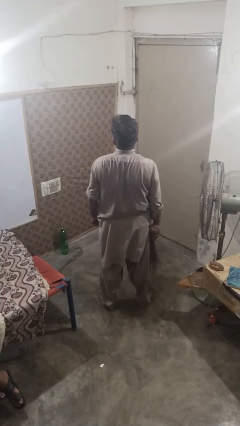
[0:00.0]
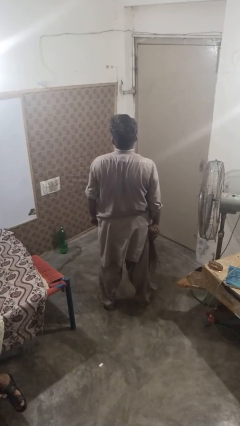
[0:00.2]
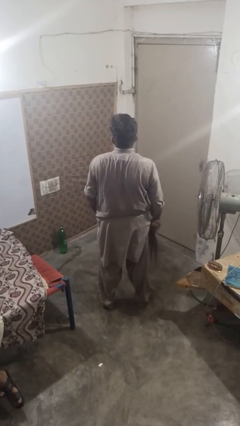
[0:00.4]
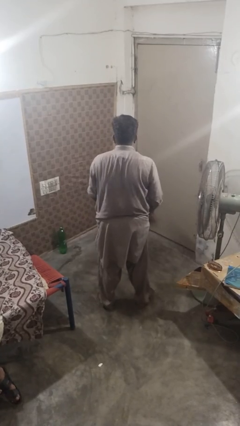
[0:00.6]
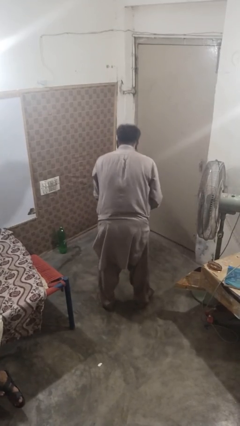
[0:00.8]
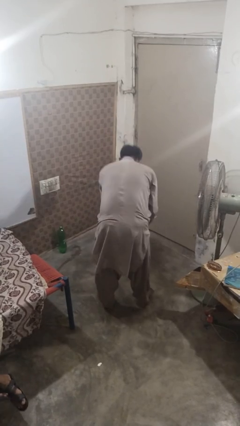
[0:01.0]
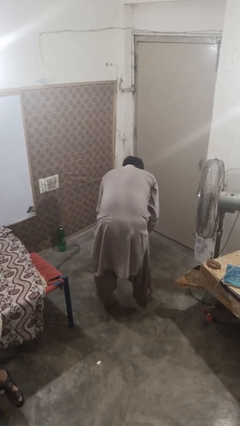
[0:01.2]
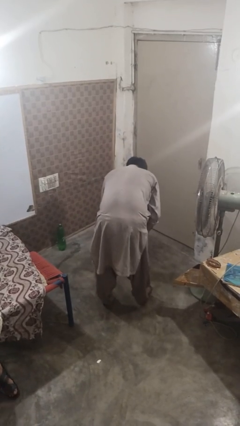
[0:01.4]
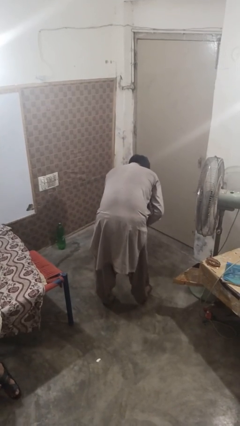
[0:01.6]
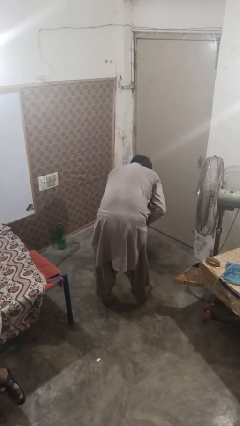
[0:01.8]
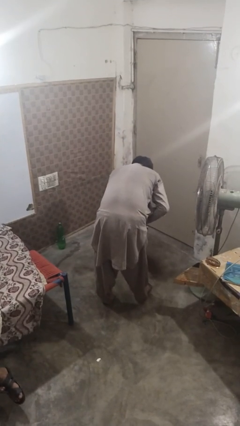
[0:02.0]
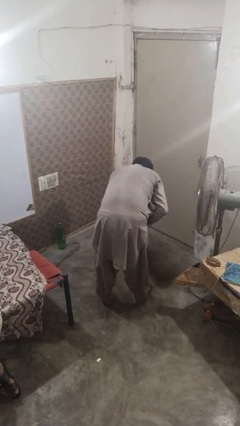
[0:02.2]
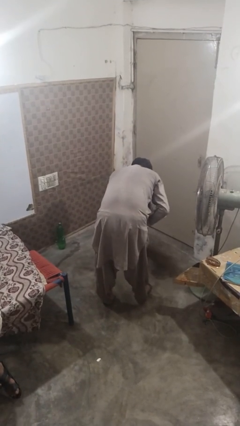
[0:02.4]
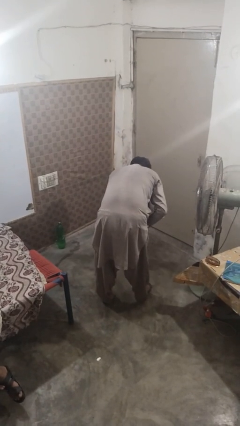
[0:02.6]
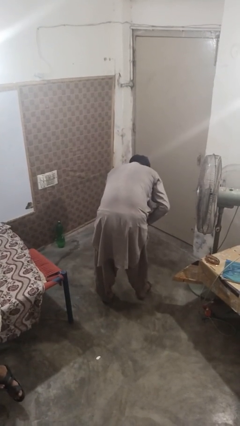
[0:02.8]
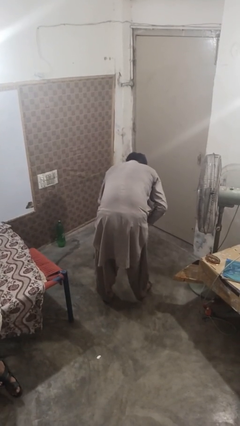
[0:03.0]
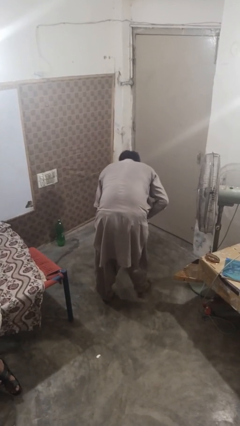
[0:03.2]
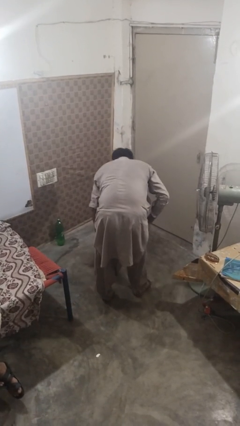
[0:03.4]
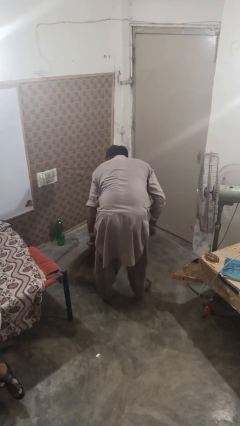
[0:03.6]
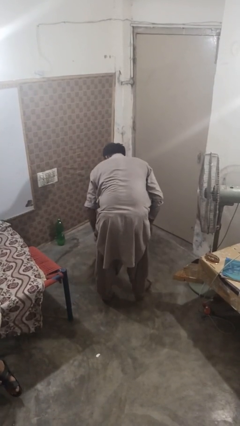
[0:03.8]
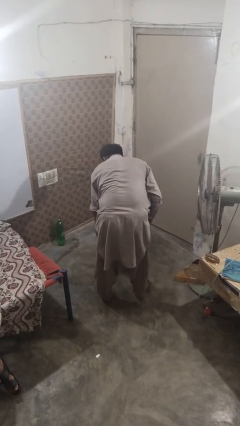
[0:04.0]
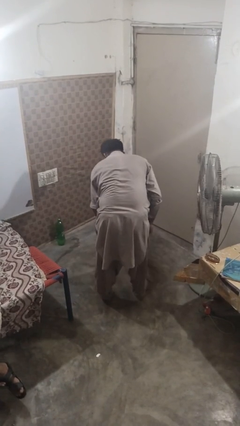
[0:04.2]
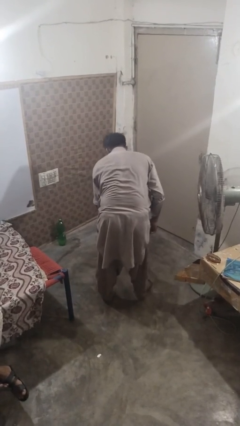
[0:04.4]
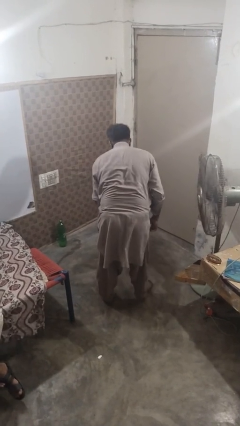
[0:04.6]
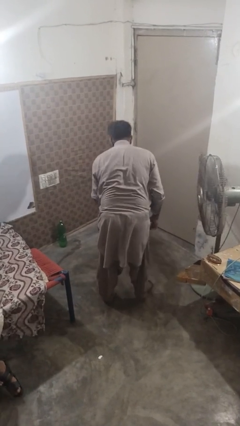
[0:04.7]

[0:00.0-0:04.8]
person sweeps floor

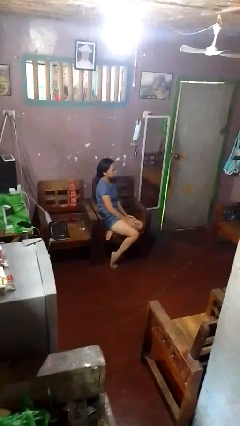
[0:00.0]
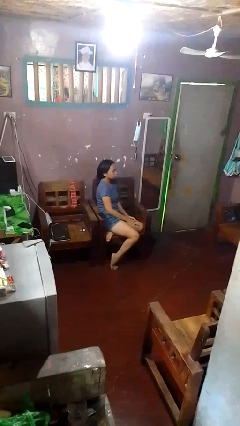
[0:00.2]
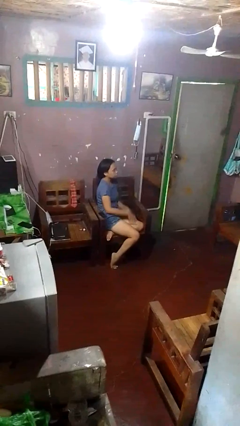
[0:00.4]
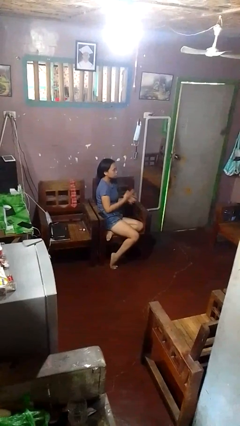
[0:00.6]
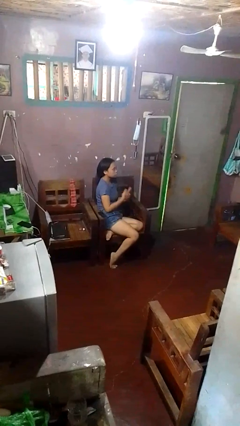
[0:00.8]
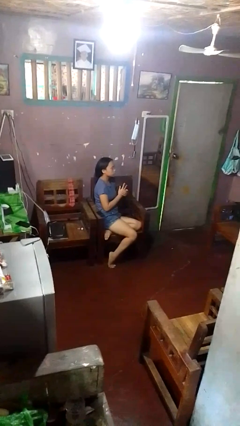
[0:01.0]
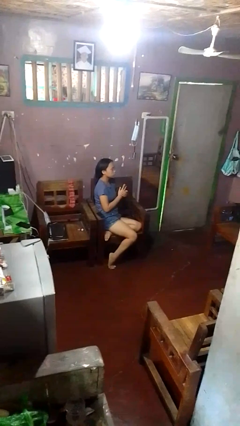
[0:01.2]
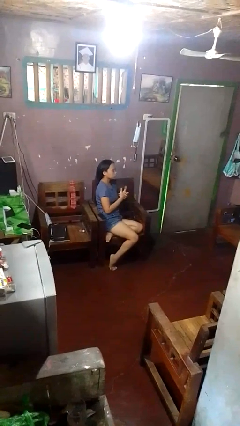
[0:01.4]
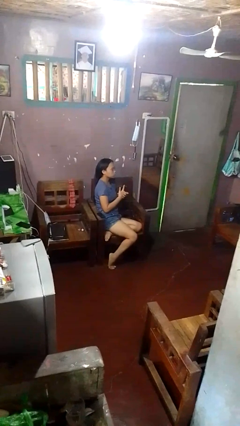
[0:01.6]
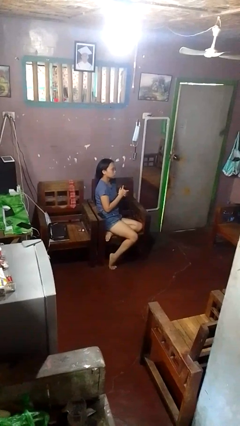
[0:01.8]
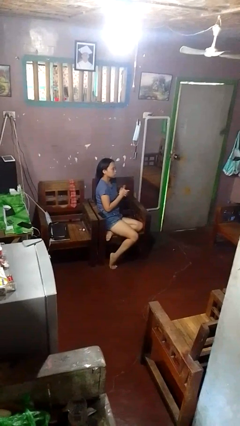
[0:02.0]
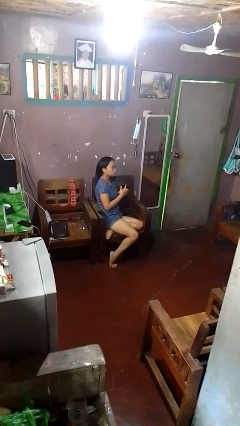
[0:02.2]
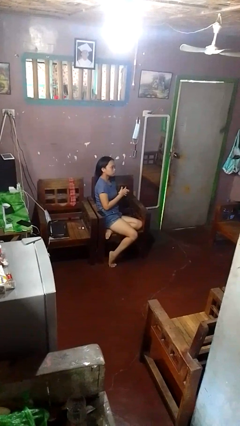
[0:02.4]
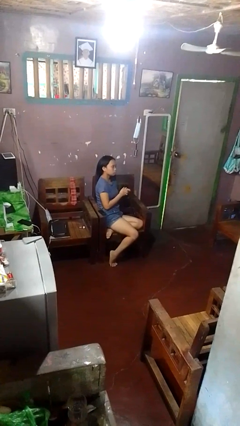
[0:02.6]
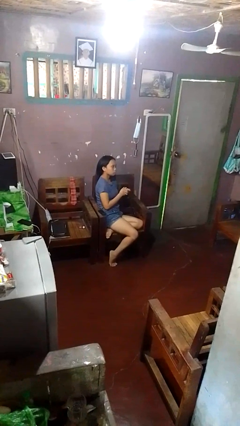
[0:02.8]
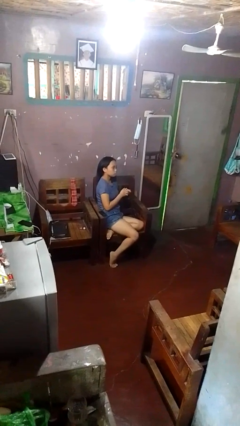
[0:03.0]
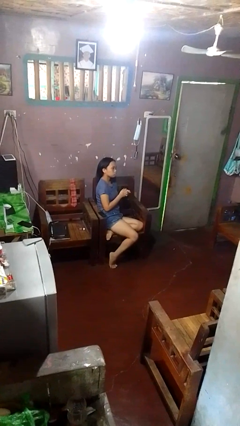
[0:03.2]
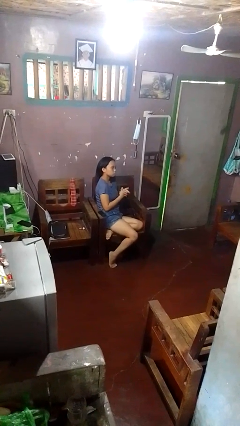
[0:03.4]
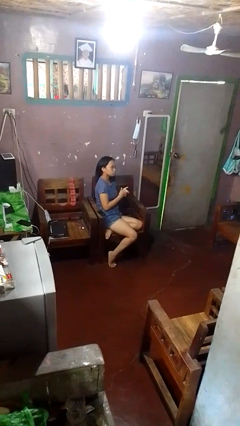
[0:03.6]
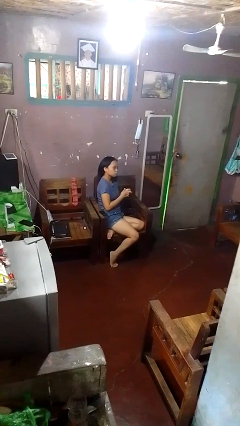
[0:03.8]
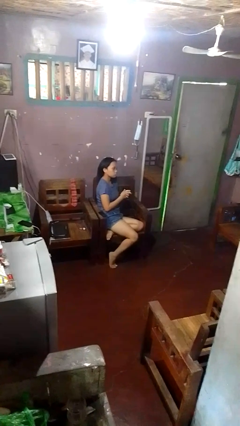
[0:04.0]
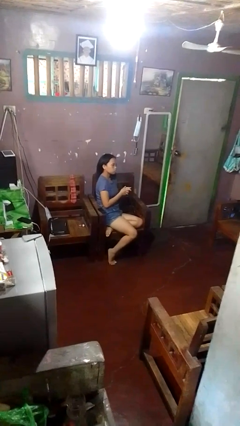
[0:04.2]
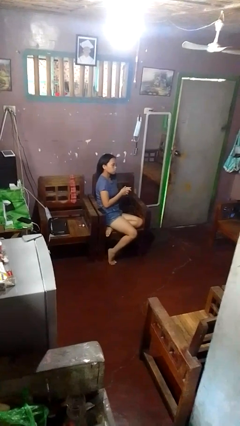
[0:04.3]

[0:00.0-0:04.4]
person cracks knuckles

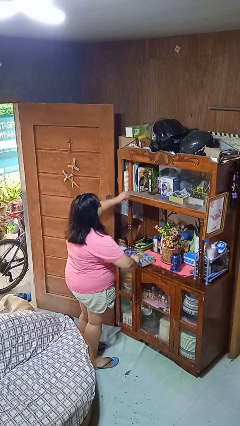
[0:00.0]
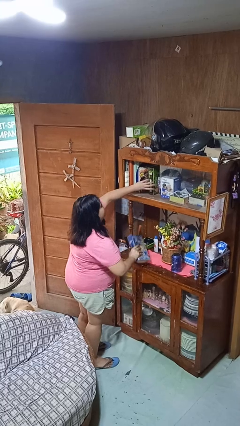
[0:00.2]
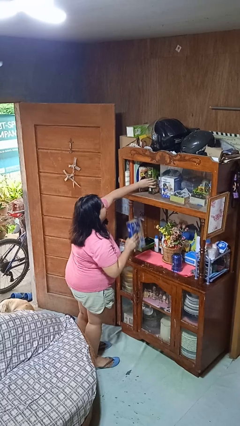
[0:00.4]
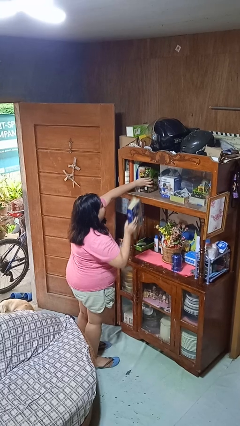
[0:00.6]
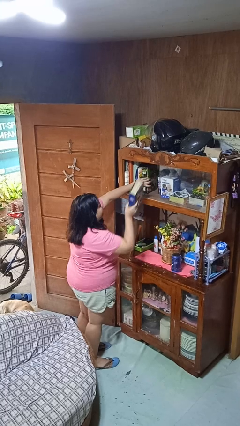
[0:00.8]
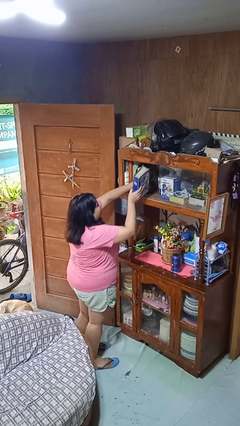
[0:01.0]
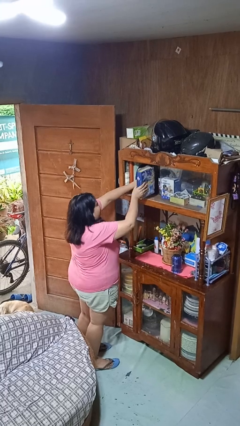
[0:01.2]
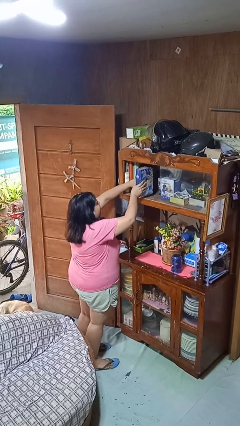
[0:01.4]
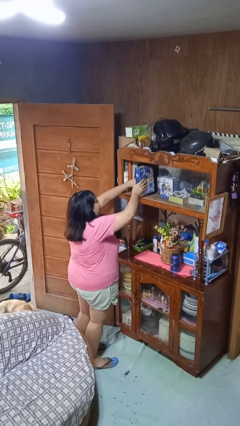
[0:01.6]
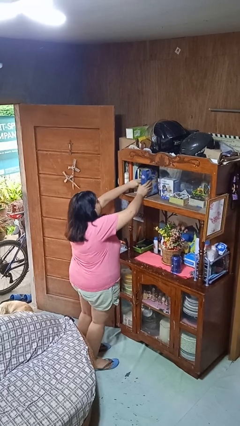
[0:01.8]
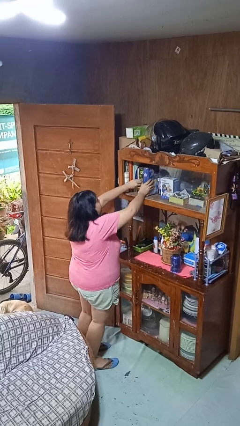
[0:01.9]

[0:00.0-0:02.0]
person puts down object on shelf

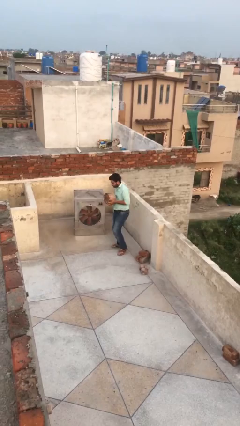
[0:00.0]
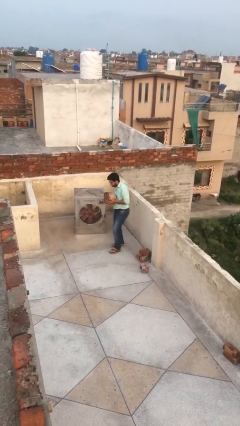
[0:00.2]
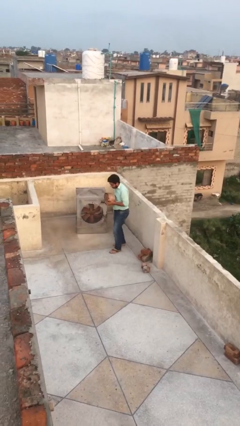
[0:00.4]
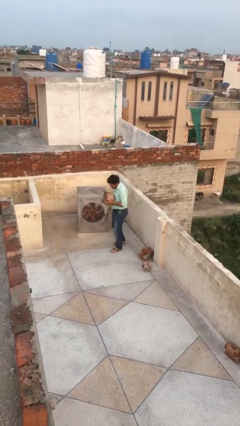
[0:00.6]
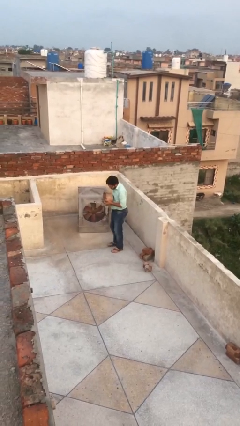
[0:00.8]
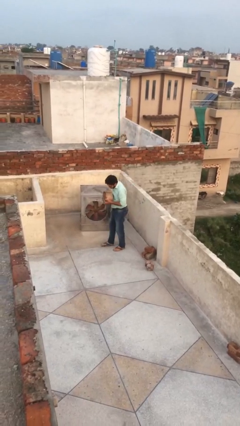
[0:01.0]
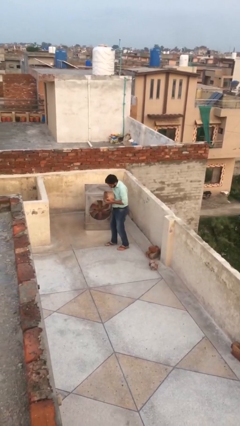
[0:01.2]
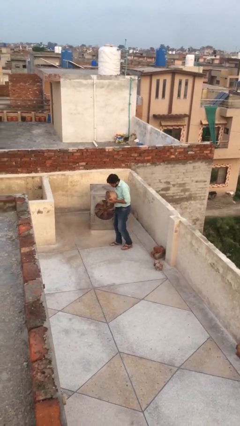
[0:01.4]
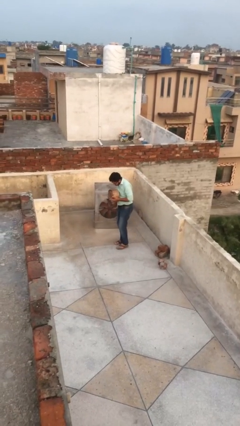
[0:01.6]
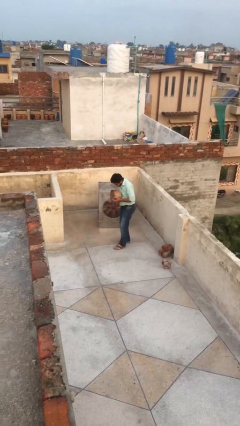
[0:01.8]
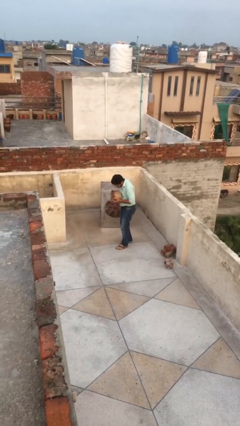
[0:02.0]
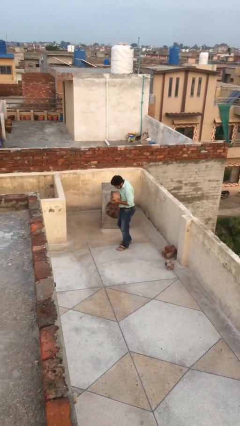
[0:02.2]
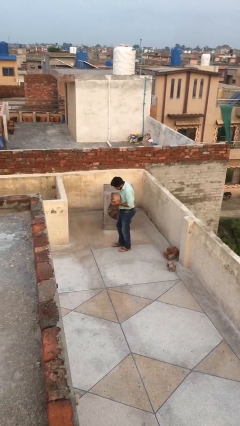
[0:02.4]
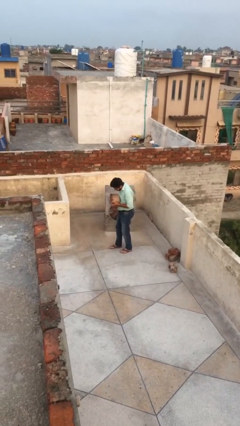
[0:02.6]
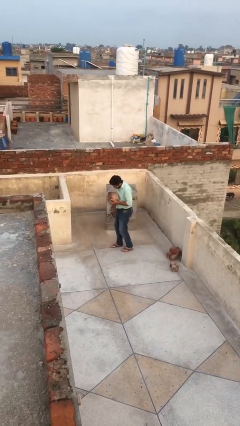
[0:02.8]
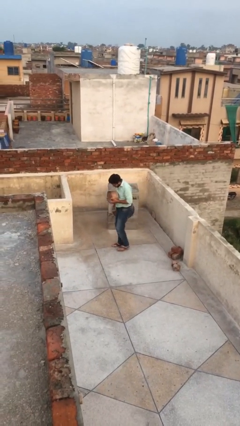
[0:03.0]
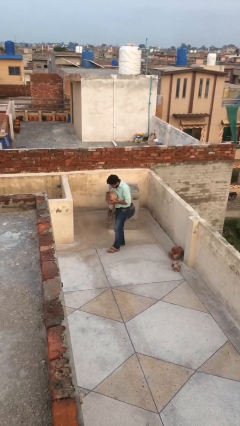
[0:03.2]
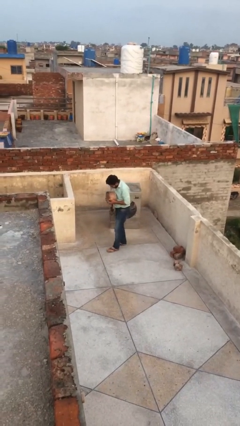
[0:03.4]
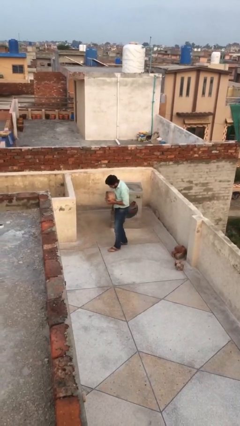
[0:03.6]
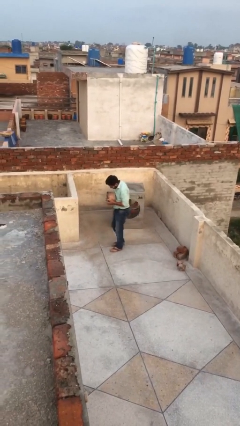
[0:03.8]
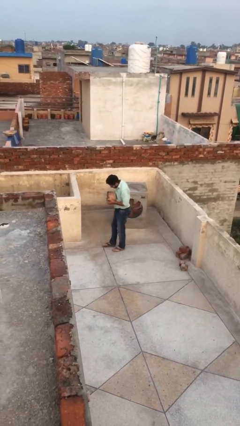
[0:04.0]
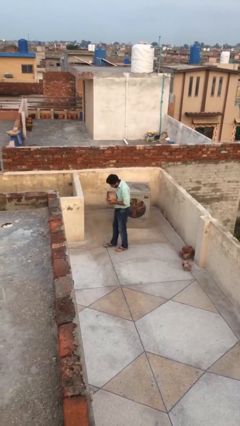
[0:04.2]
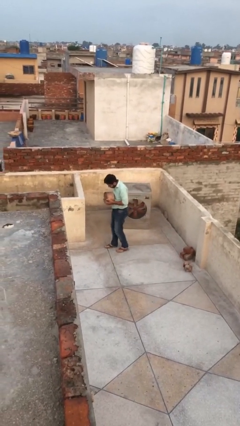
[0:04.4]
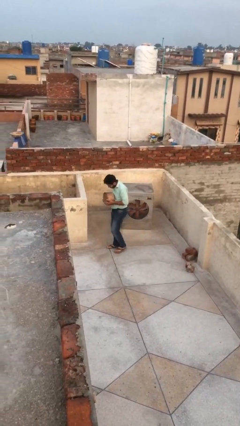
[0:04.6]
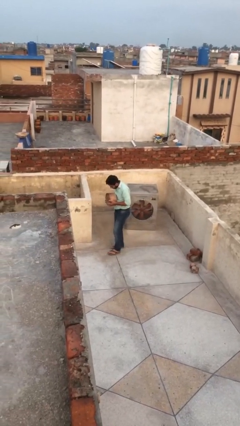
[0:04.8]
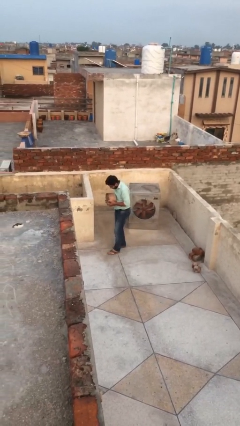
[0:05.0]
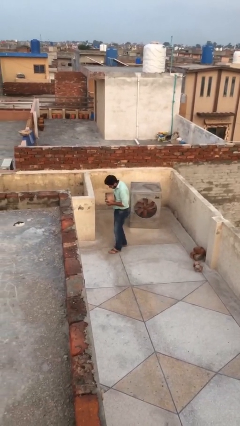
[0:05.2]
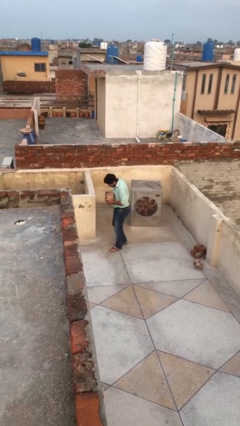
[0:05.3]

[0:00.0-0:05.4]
person carries heavy object

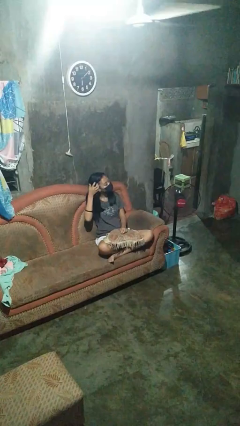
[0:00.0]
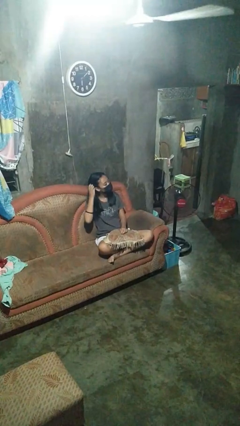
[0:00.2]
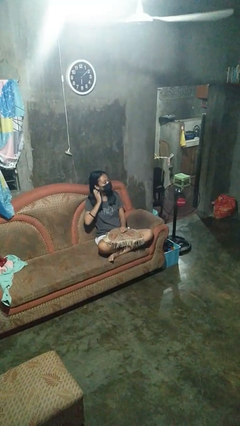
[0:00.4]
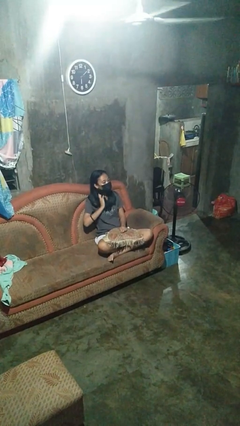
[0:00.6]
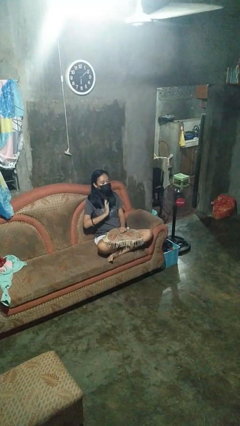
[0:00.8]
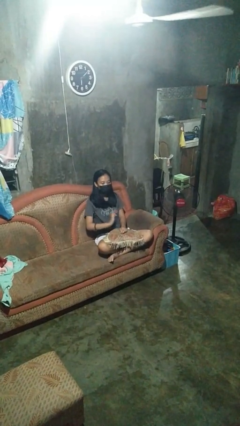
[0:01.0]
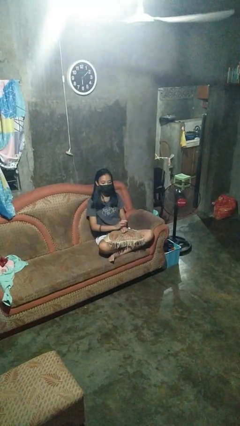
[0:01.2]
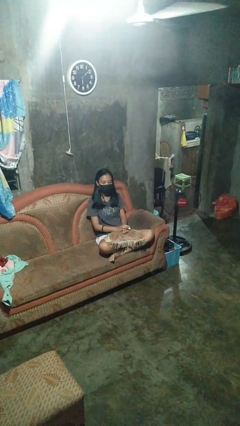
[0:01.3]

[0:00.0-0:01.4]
person strokes hair
